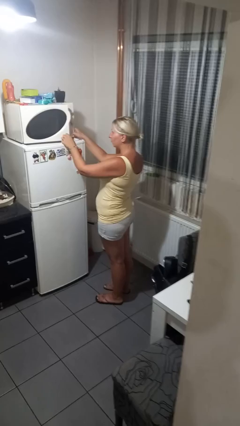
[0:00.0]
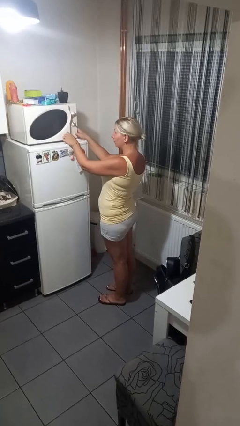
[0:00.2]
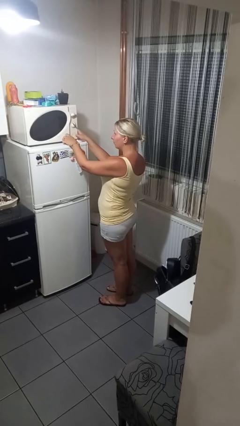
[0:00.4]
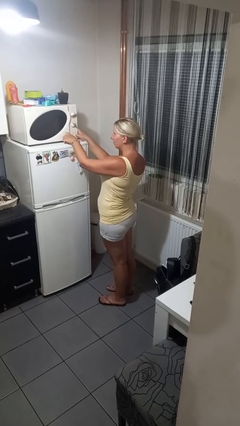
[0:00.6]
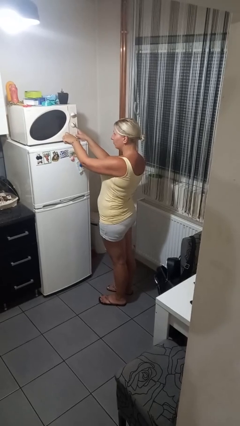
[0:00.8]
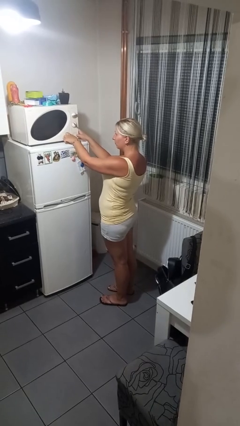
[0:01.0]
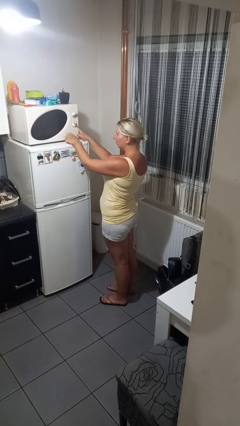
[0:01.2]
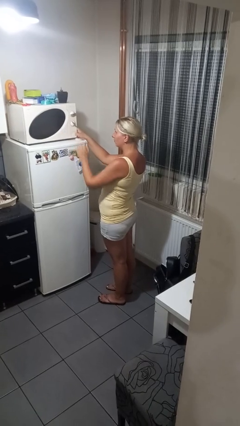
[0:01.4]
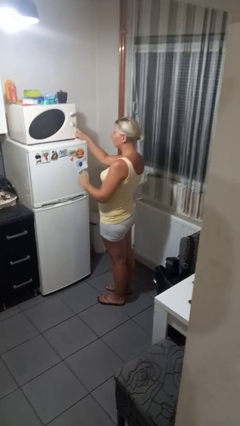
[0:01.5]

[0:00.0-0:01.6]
person closes microwave

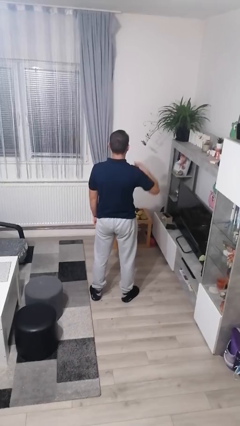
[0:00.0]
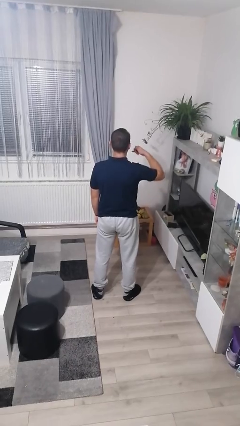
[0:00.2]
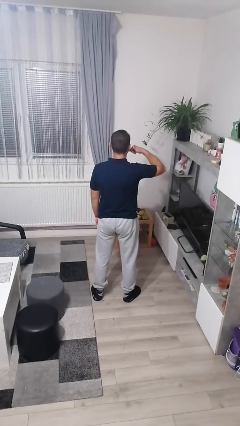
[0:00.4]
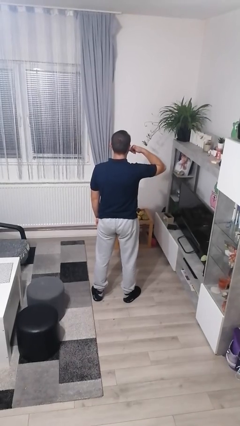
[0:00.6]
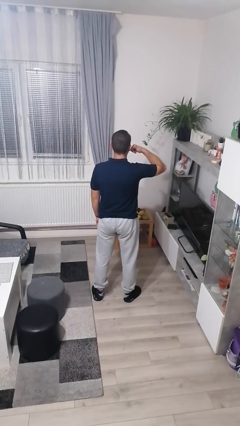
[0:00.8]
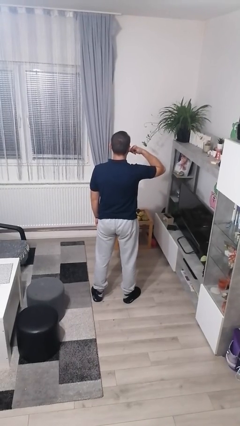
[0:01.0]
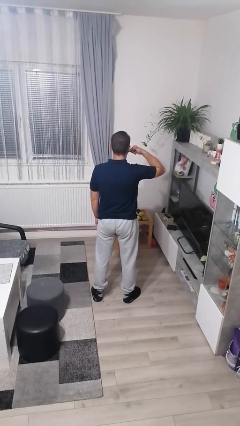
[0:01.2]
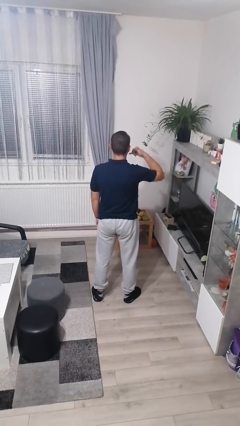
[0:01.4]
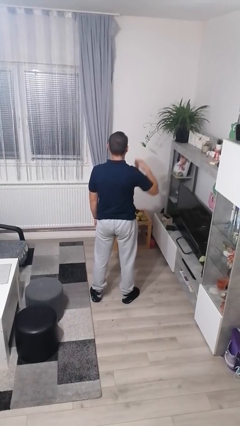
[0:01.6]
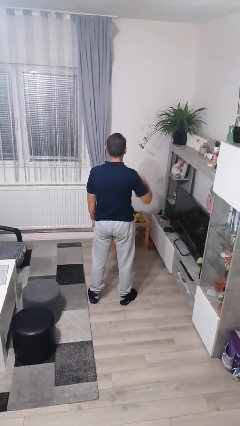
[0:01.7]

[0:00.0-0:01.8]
person gestures call me

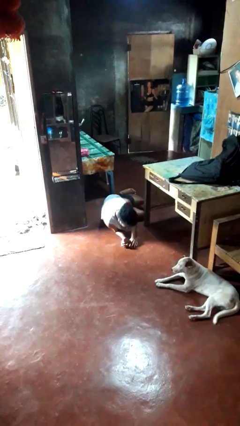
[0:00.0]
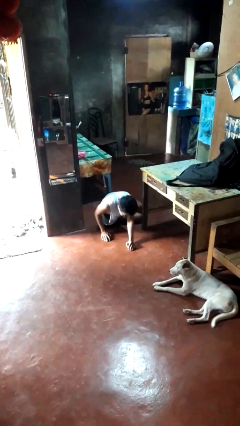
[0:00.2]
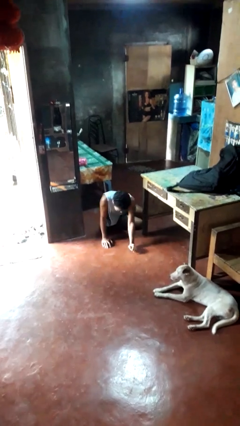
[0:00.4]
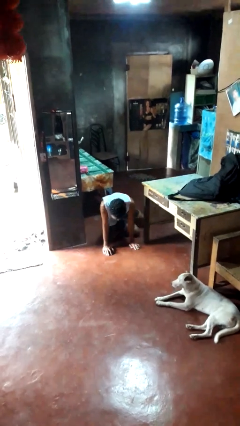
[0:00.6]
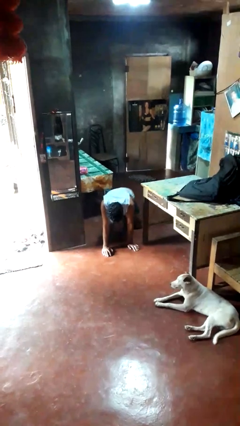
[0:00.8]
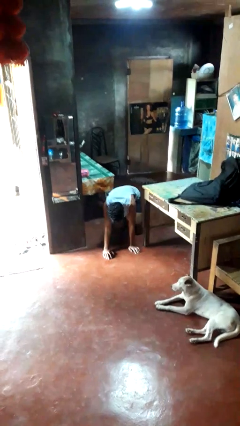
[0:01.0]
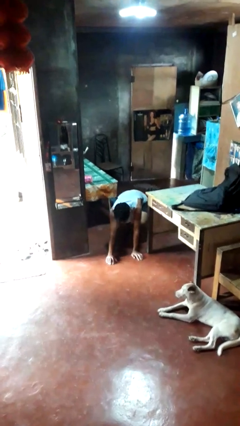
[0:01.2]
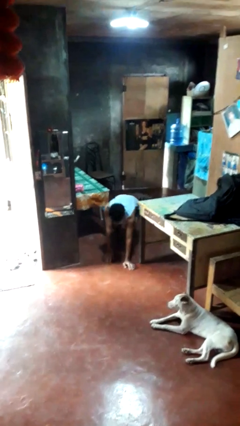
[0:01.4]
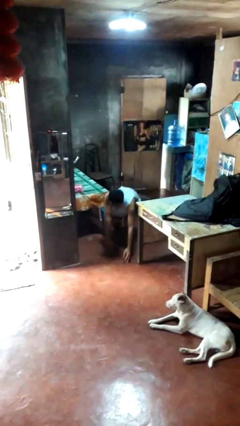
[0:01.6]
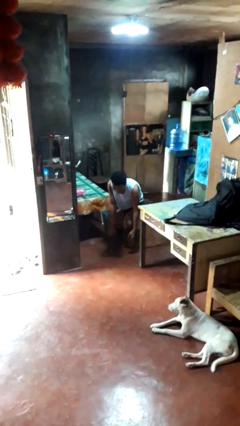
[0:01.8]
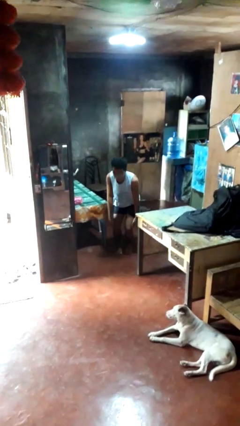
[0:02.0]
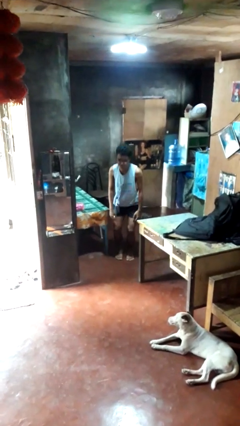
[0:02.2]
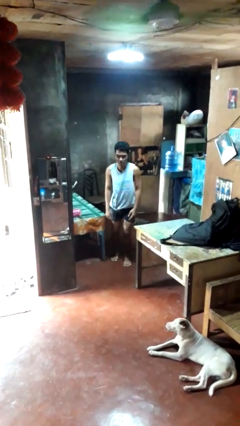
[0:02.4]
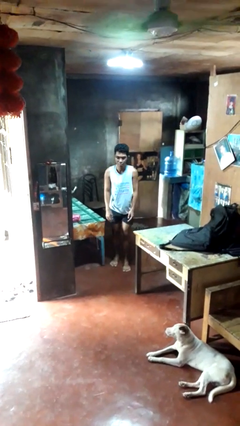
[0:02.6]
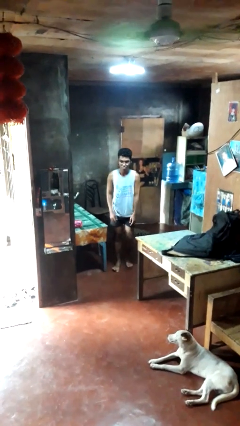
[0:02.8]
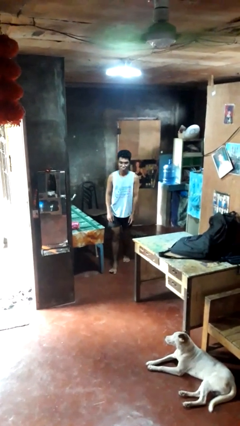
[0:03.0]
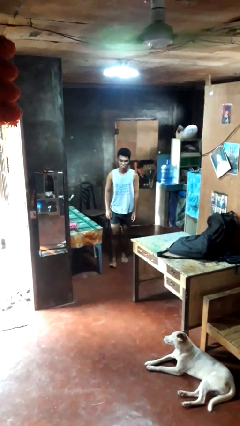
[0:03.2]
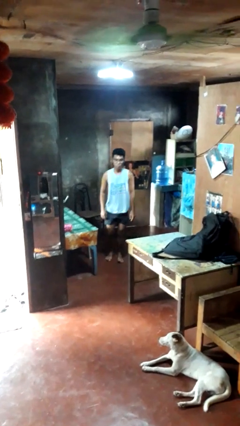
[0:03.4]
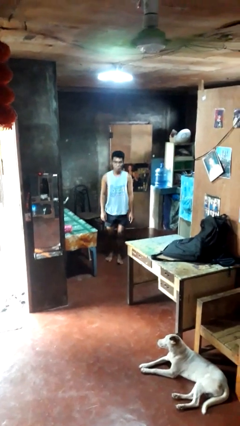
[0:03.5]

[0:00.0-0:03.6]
person stands up from floor

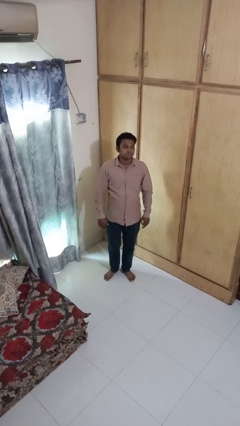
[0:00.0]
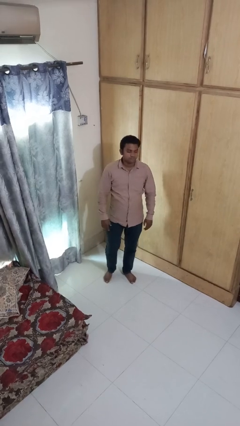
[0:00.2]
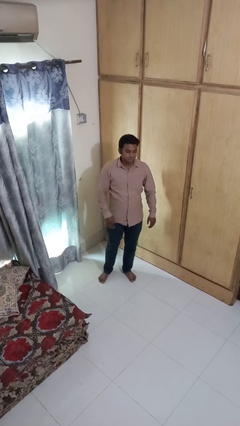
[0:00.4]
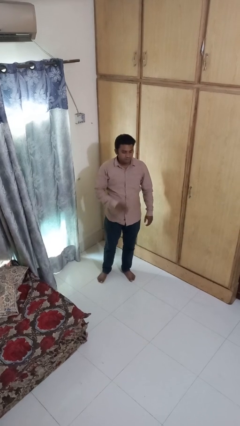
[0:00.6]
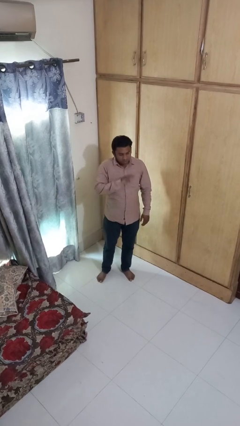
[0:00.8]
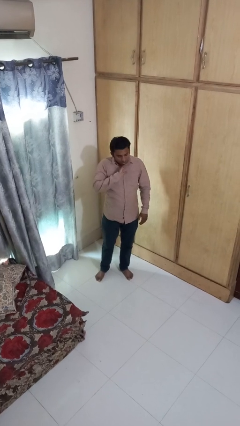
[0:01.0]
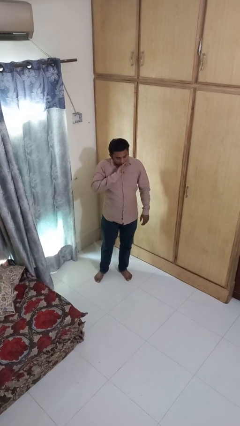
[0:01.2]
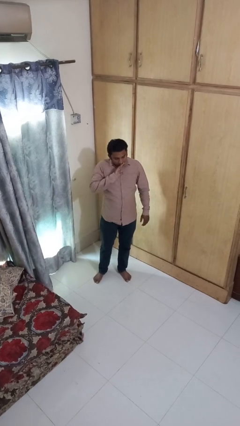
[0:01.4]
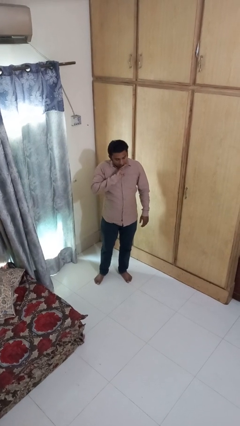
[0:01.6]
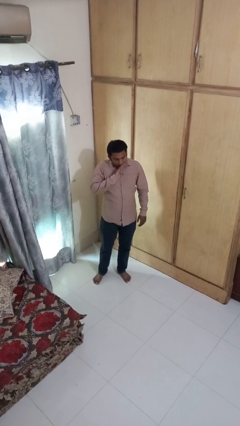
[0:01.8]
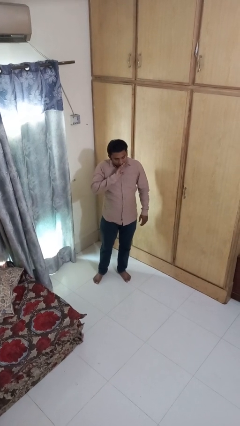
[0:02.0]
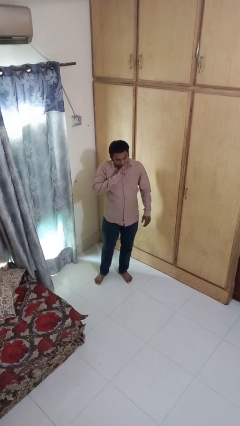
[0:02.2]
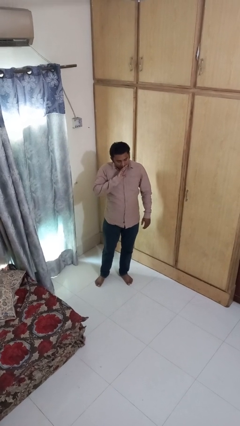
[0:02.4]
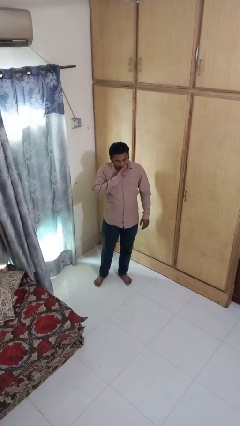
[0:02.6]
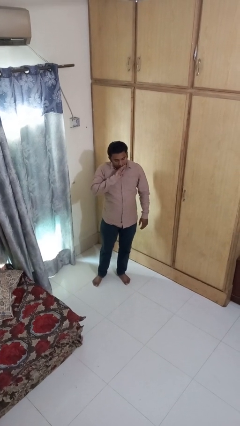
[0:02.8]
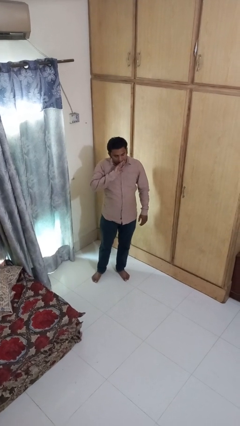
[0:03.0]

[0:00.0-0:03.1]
person yawns

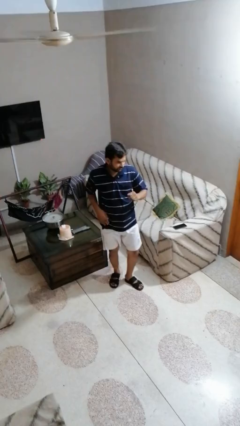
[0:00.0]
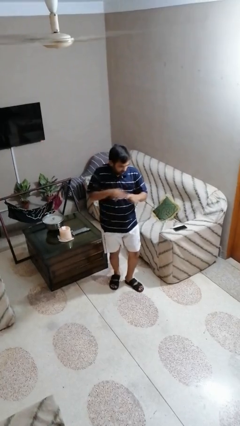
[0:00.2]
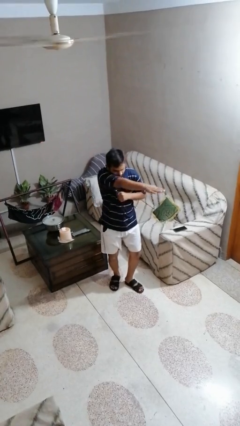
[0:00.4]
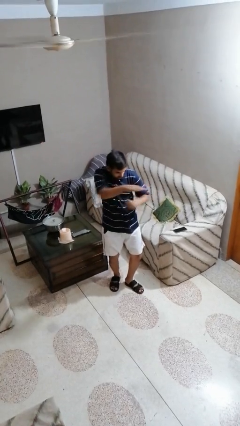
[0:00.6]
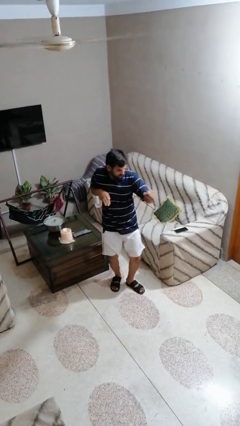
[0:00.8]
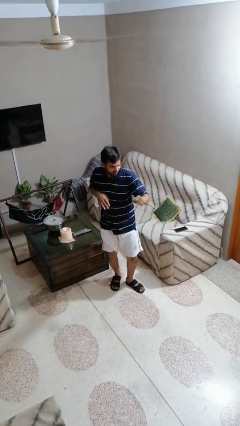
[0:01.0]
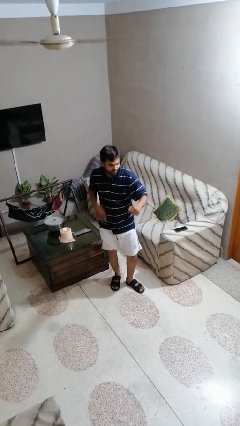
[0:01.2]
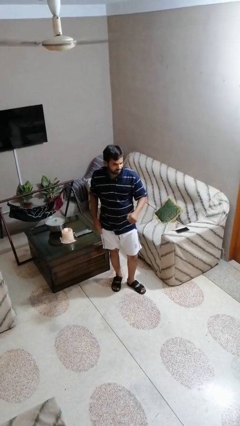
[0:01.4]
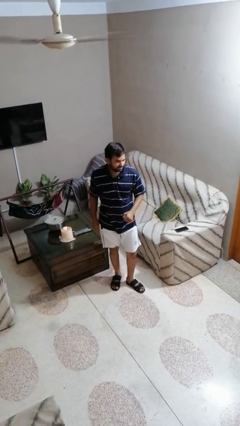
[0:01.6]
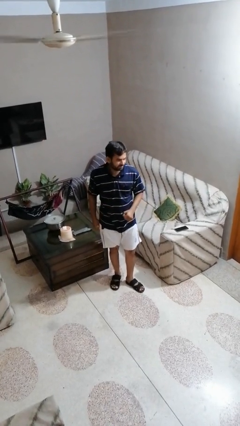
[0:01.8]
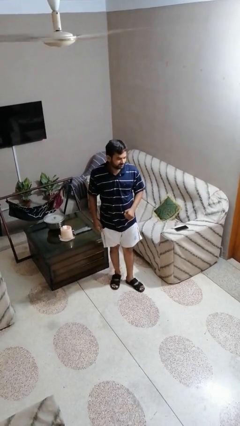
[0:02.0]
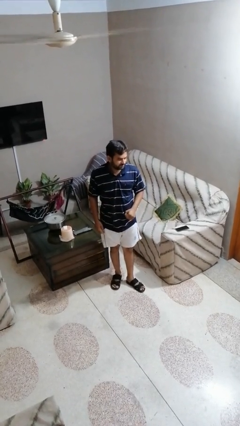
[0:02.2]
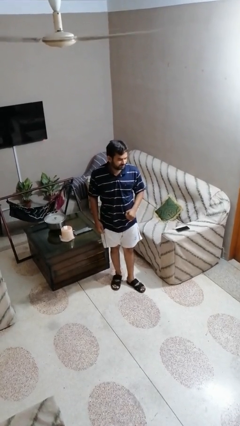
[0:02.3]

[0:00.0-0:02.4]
person karate chop

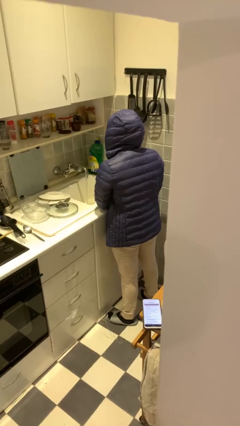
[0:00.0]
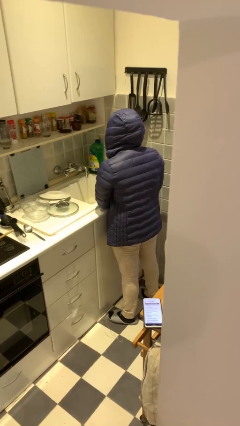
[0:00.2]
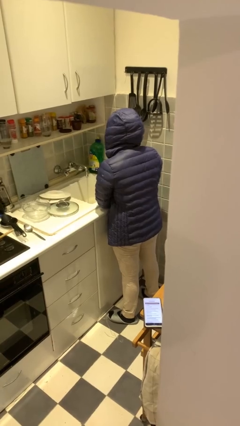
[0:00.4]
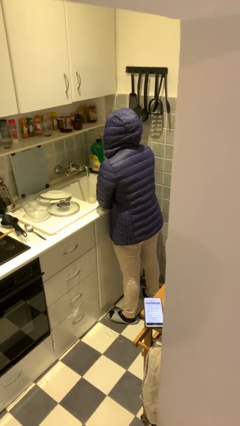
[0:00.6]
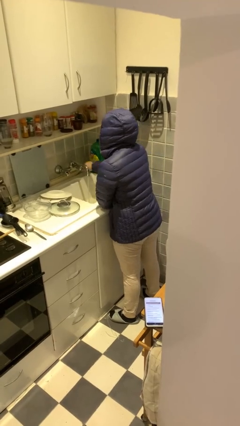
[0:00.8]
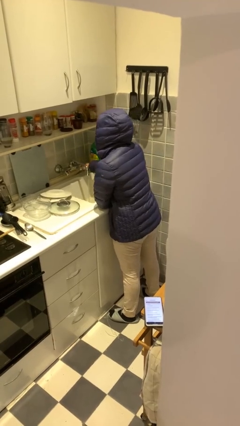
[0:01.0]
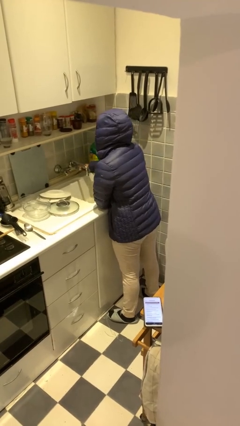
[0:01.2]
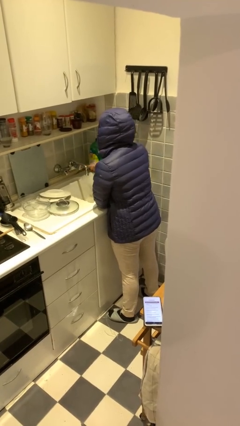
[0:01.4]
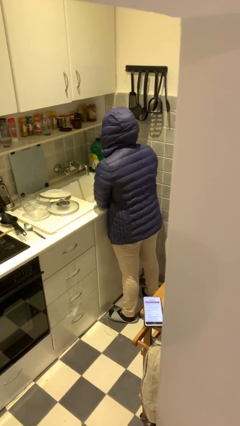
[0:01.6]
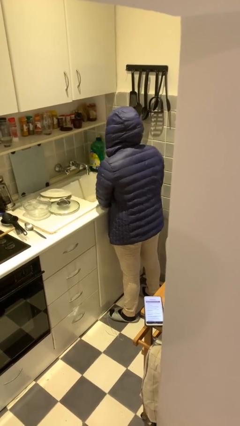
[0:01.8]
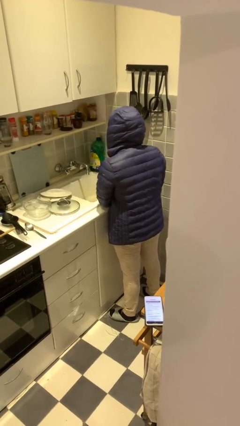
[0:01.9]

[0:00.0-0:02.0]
person turns off faucet

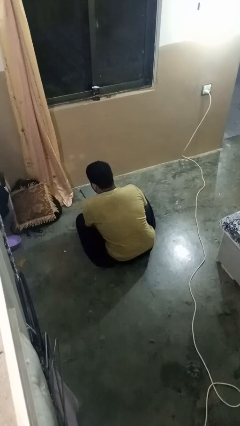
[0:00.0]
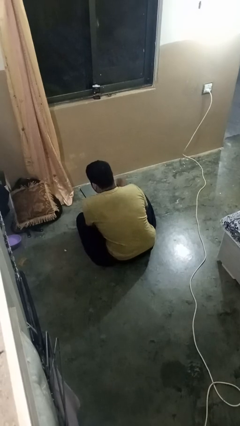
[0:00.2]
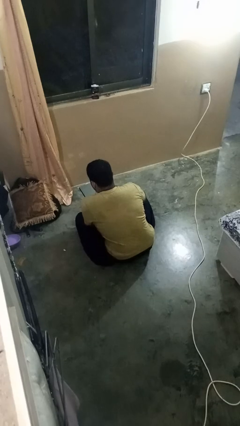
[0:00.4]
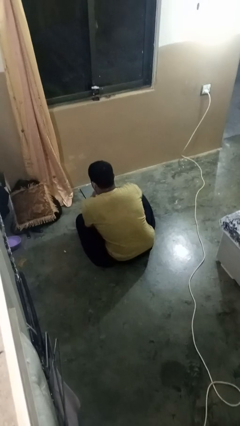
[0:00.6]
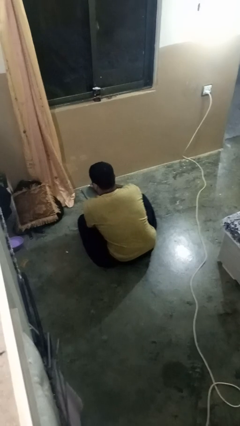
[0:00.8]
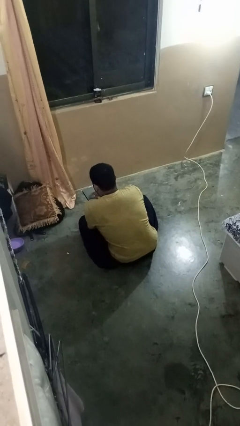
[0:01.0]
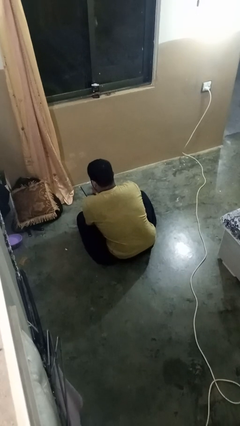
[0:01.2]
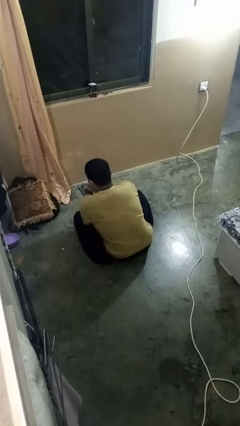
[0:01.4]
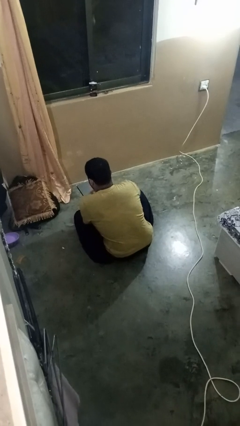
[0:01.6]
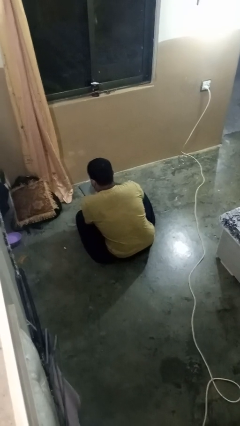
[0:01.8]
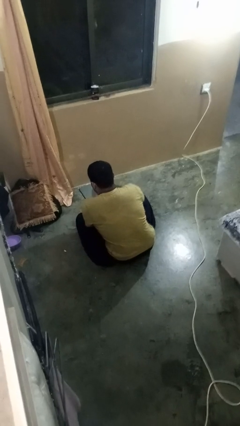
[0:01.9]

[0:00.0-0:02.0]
person interacts with tablet

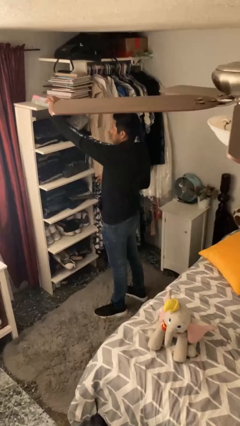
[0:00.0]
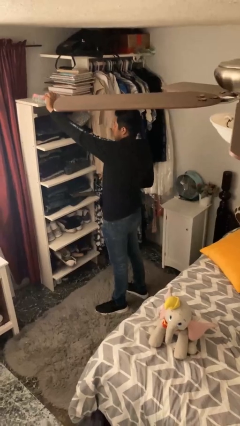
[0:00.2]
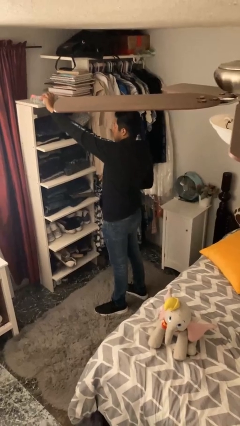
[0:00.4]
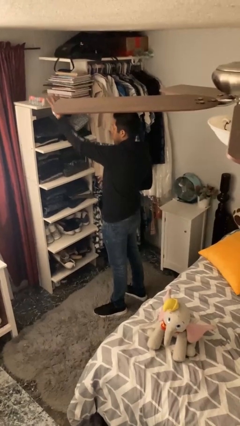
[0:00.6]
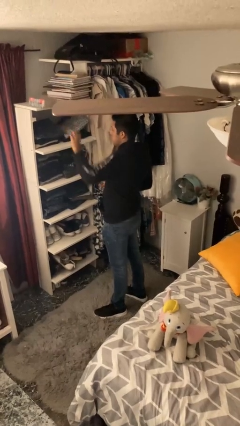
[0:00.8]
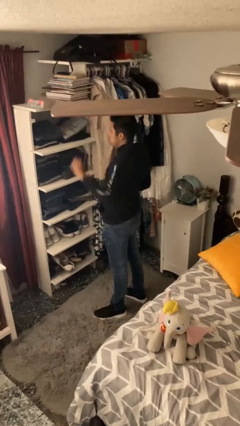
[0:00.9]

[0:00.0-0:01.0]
person puts down object on shelf
